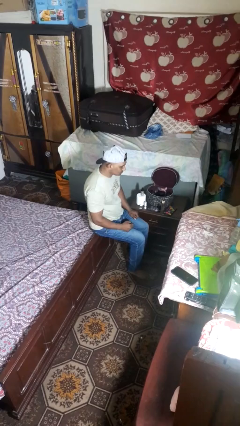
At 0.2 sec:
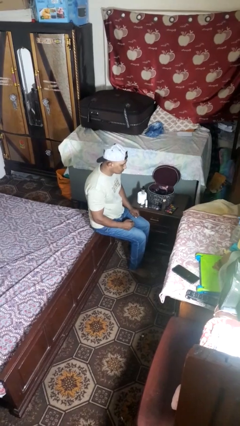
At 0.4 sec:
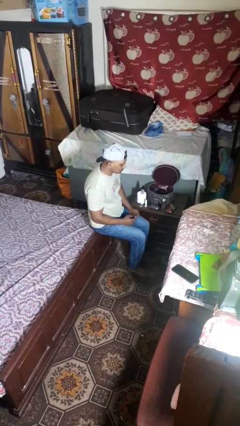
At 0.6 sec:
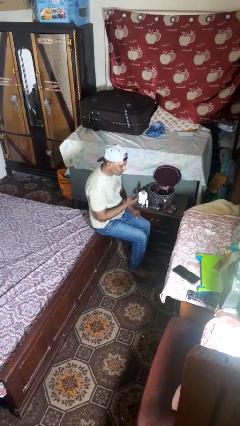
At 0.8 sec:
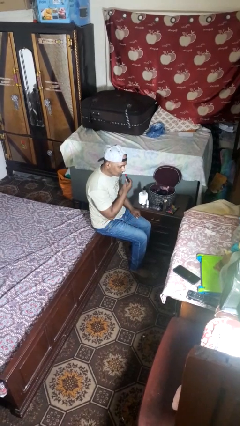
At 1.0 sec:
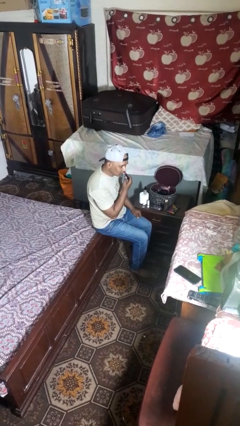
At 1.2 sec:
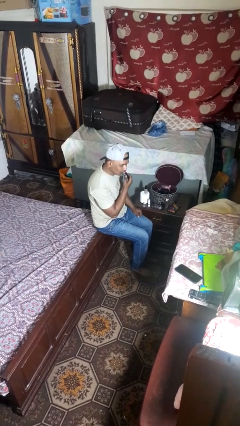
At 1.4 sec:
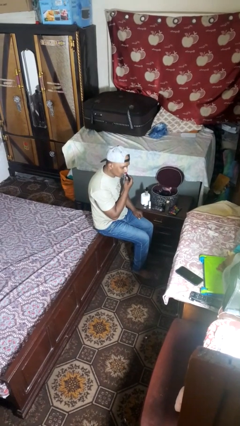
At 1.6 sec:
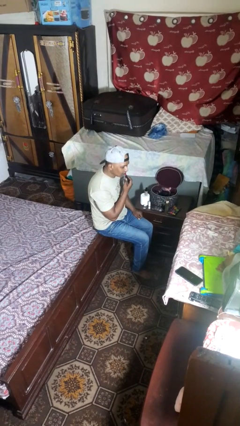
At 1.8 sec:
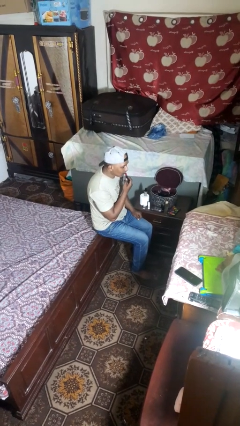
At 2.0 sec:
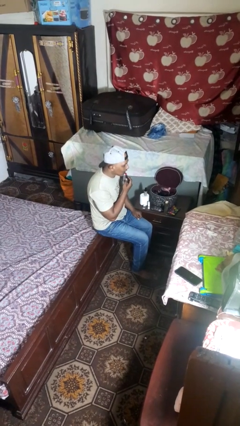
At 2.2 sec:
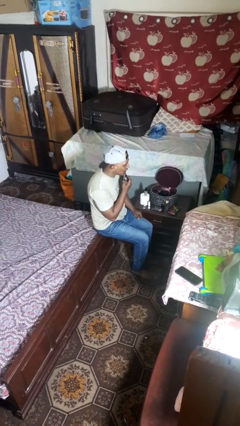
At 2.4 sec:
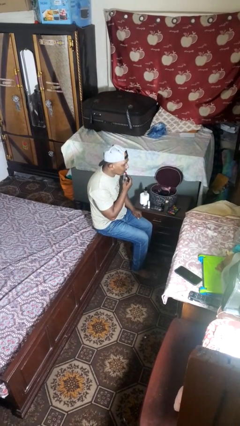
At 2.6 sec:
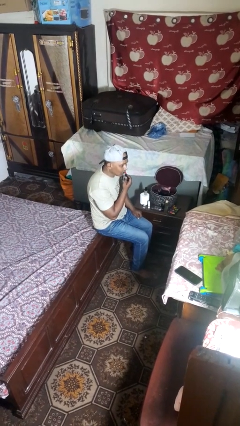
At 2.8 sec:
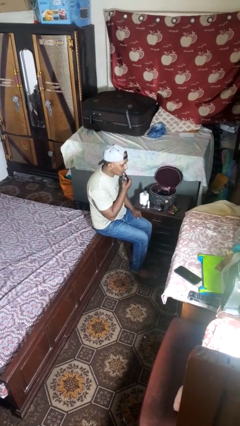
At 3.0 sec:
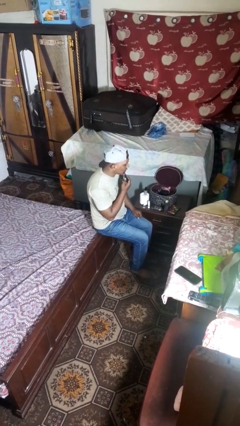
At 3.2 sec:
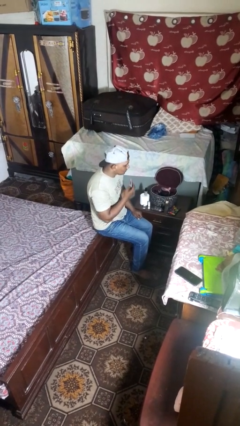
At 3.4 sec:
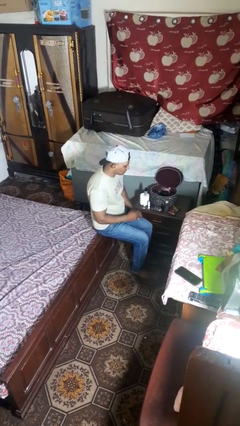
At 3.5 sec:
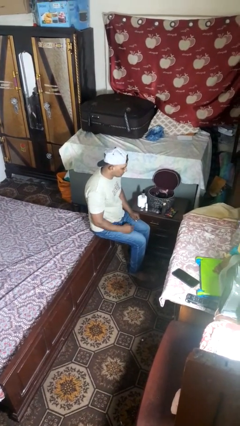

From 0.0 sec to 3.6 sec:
person applies lip makeup

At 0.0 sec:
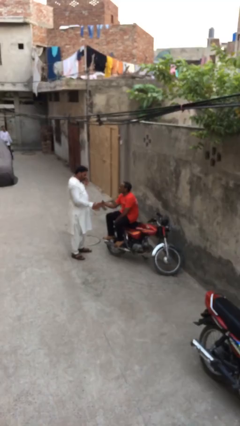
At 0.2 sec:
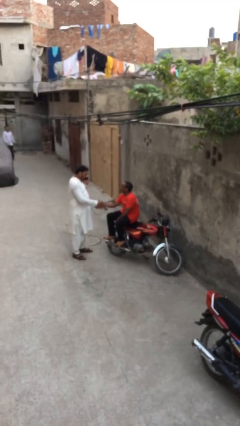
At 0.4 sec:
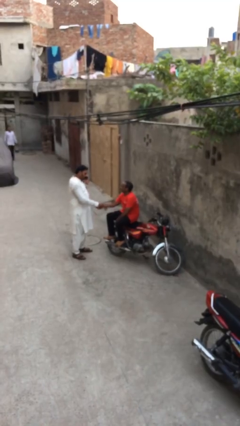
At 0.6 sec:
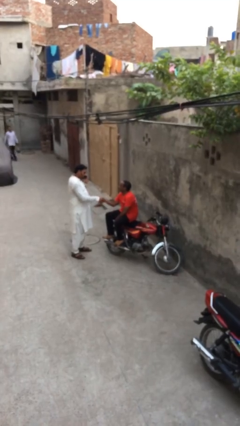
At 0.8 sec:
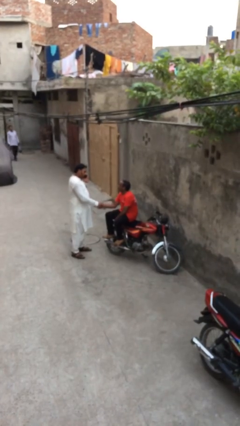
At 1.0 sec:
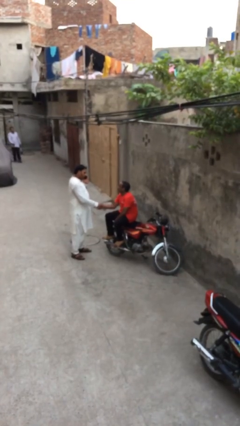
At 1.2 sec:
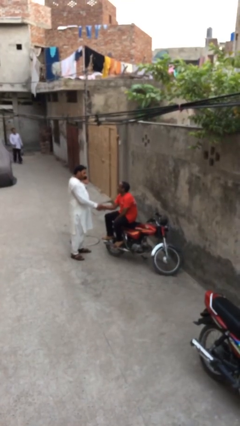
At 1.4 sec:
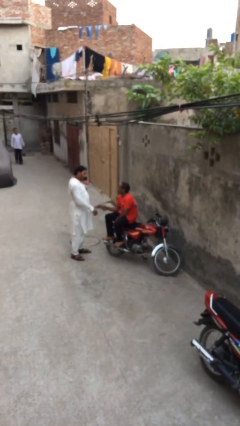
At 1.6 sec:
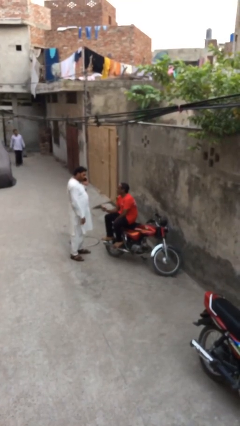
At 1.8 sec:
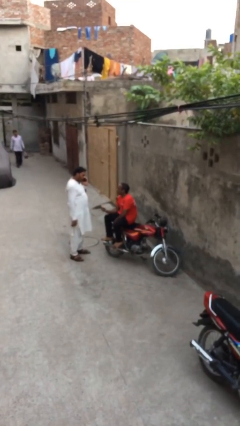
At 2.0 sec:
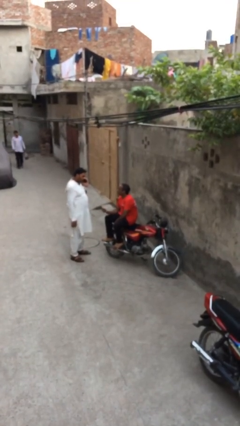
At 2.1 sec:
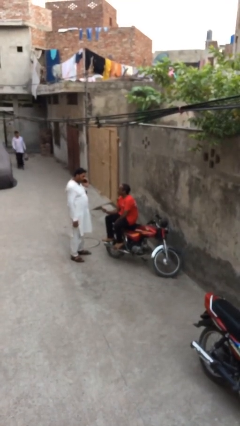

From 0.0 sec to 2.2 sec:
person shakes hand

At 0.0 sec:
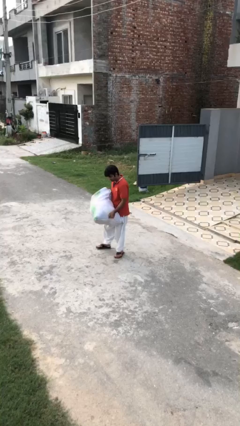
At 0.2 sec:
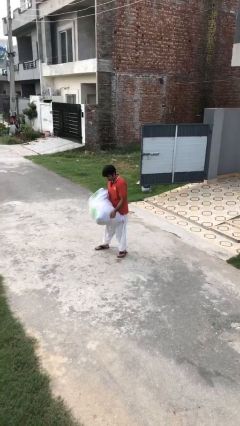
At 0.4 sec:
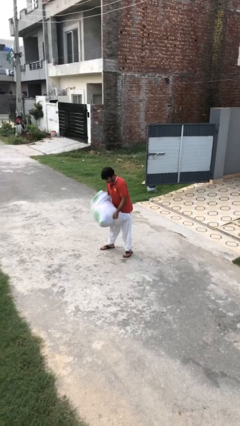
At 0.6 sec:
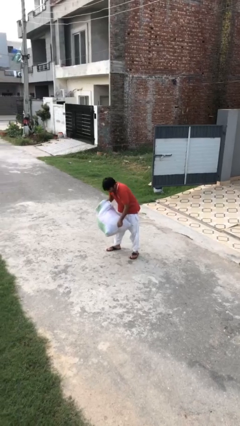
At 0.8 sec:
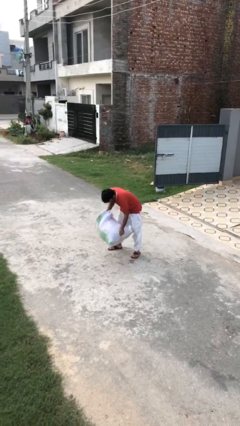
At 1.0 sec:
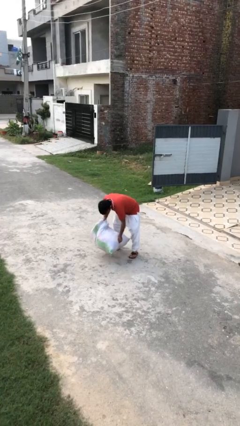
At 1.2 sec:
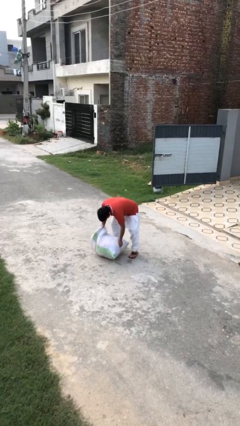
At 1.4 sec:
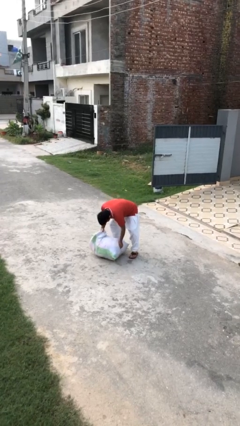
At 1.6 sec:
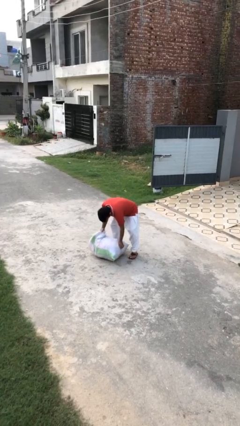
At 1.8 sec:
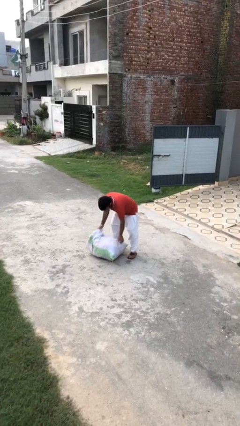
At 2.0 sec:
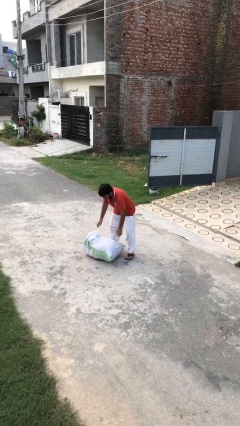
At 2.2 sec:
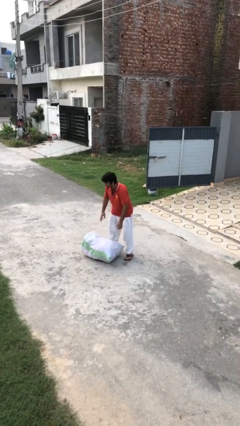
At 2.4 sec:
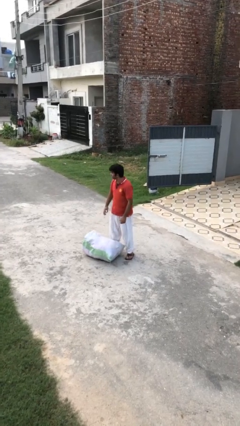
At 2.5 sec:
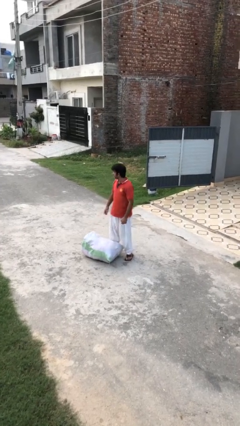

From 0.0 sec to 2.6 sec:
person puts down object on floor

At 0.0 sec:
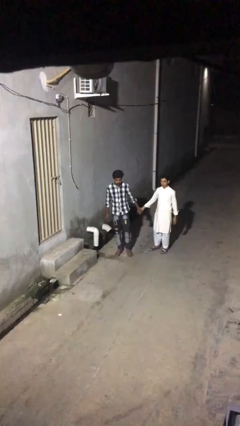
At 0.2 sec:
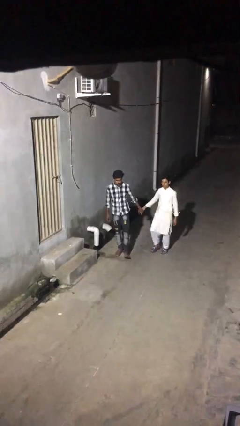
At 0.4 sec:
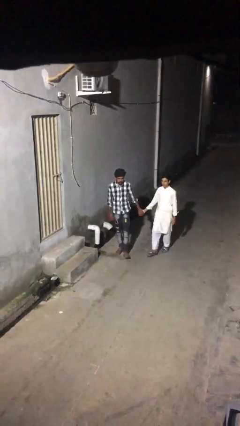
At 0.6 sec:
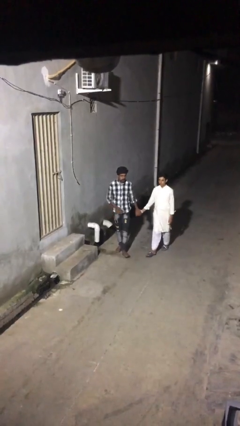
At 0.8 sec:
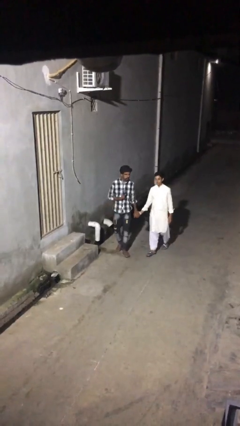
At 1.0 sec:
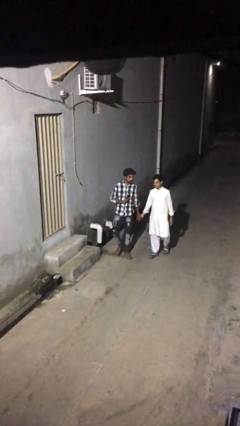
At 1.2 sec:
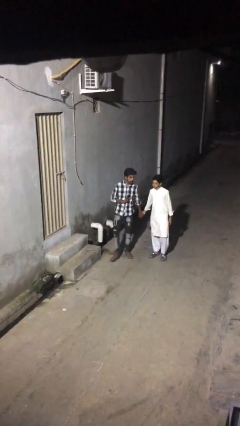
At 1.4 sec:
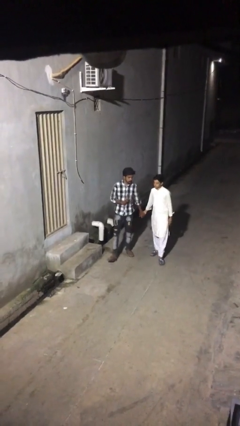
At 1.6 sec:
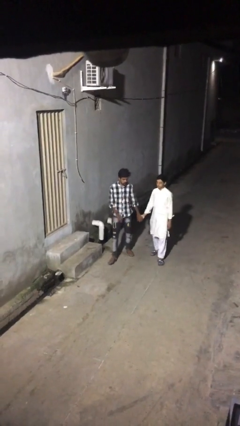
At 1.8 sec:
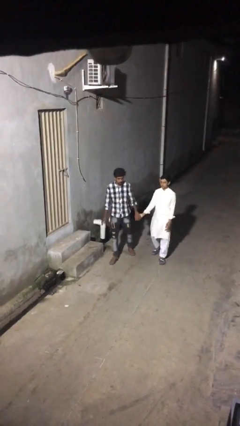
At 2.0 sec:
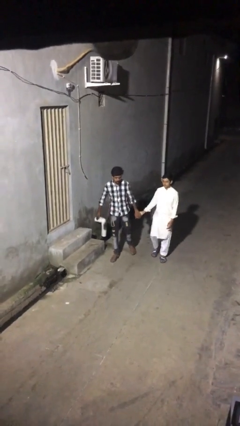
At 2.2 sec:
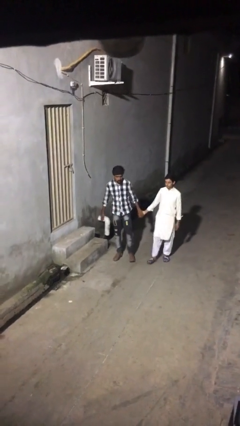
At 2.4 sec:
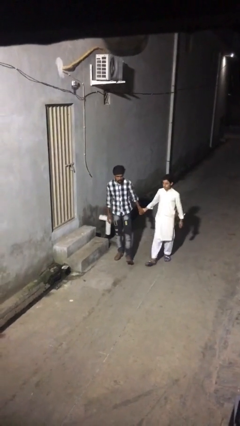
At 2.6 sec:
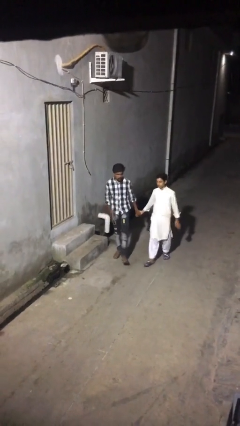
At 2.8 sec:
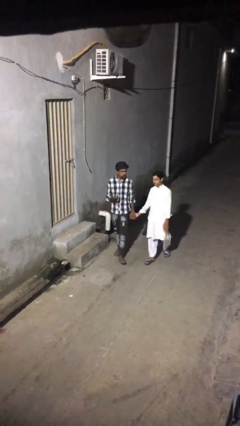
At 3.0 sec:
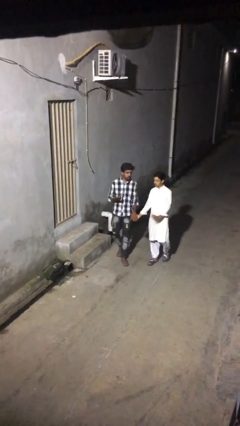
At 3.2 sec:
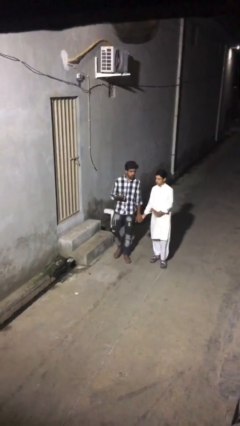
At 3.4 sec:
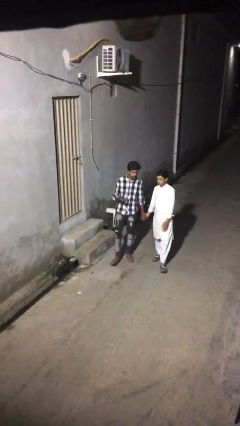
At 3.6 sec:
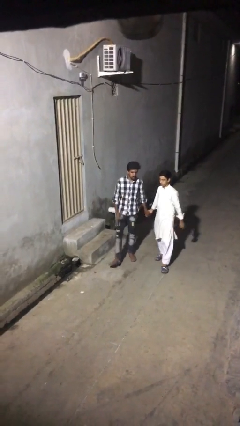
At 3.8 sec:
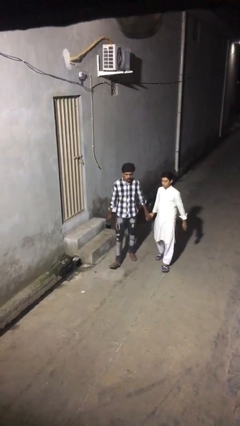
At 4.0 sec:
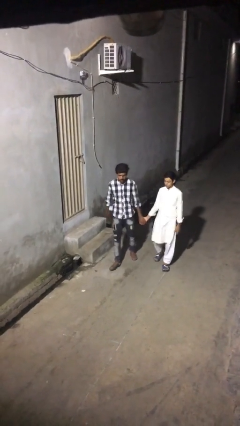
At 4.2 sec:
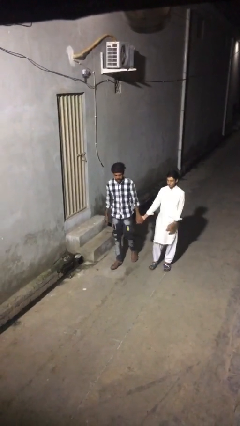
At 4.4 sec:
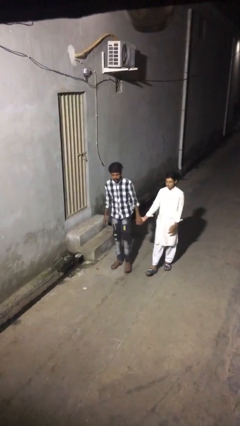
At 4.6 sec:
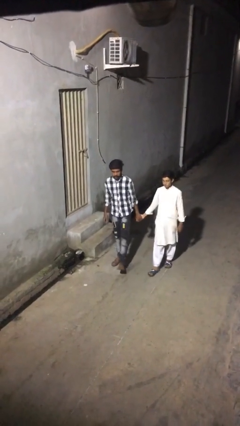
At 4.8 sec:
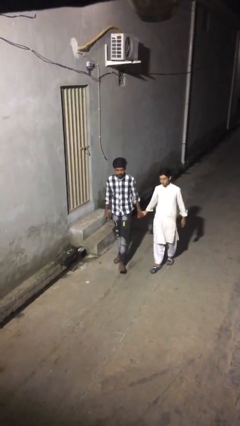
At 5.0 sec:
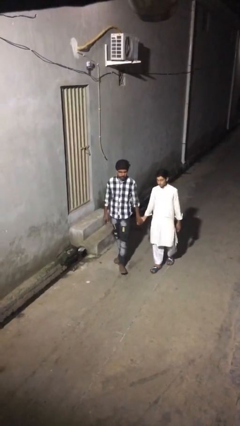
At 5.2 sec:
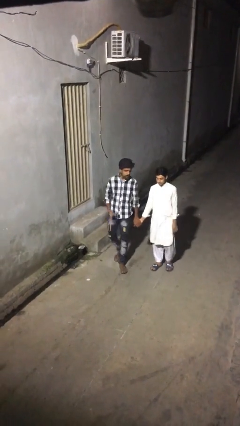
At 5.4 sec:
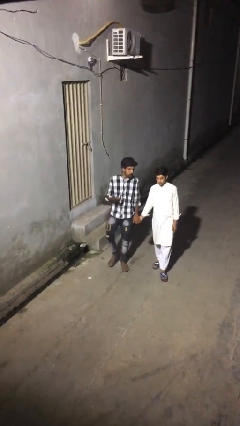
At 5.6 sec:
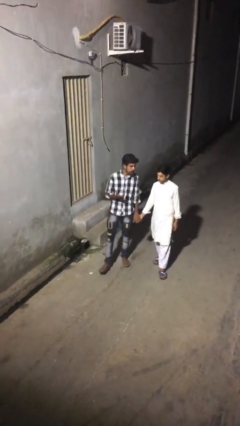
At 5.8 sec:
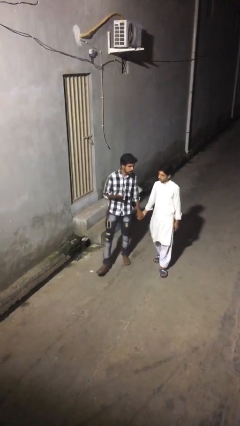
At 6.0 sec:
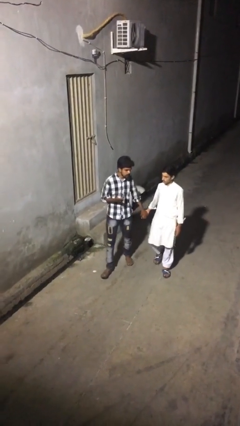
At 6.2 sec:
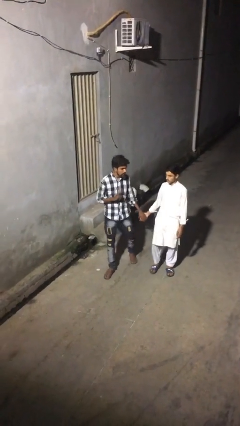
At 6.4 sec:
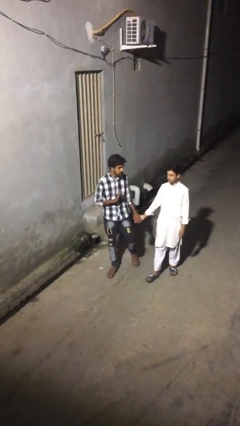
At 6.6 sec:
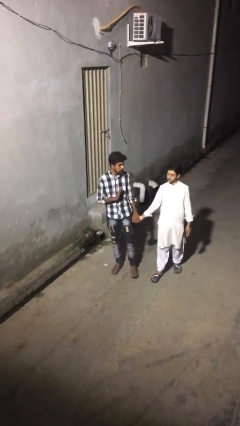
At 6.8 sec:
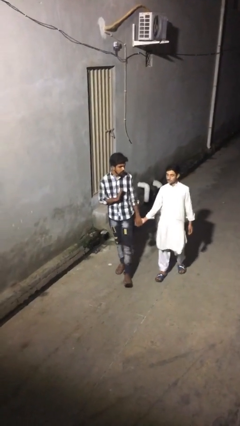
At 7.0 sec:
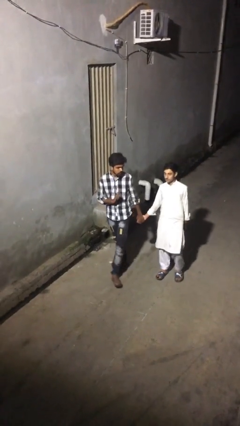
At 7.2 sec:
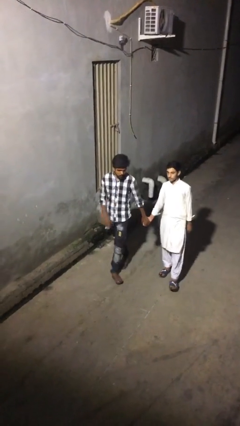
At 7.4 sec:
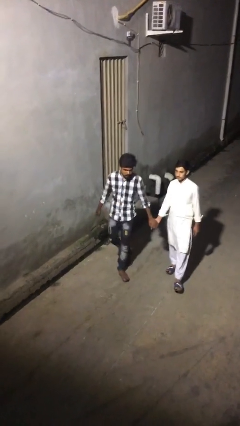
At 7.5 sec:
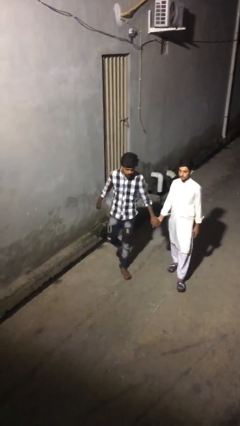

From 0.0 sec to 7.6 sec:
person holds hand

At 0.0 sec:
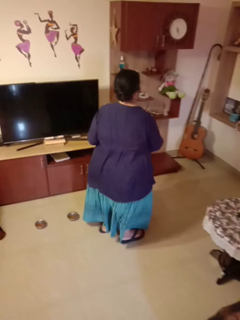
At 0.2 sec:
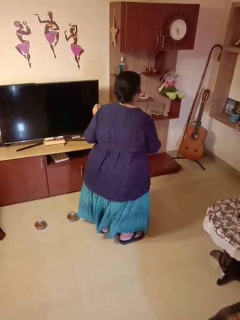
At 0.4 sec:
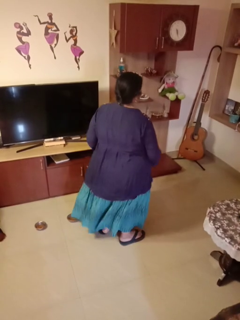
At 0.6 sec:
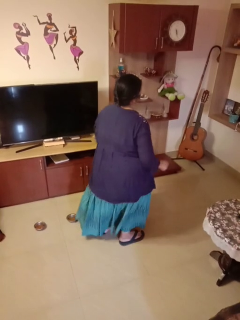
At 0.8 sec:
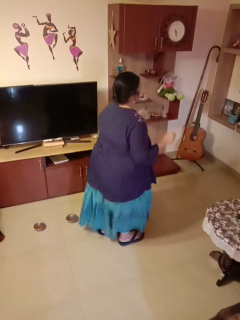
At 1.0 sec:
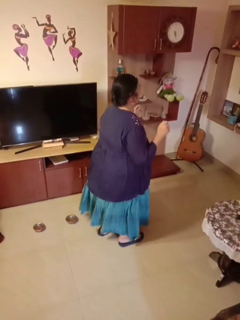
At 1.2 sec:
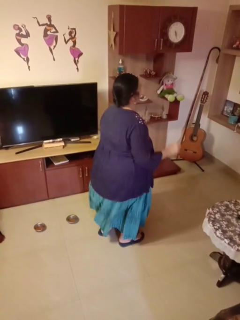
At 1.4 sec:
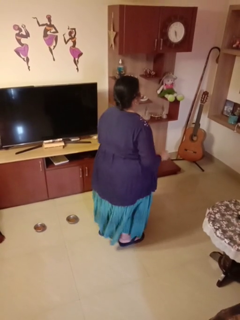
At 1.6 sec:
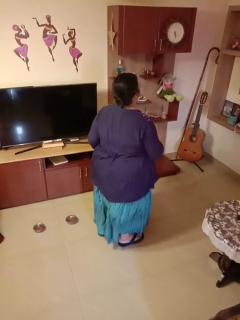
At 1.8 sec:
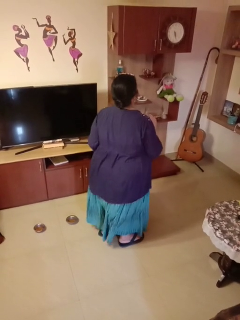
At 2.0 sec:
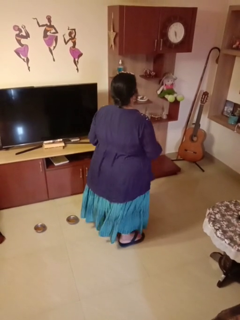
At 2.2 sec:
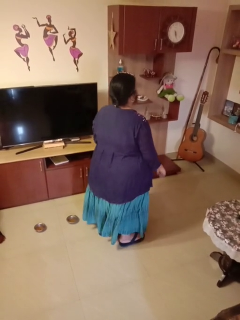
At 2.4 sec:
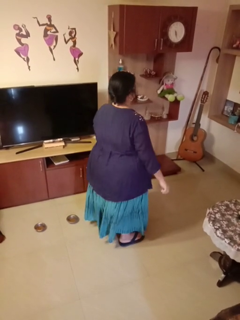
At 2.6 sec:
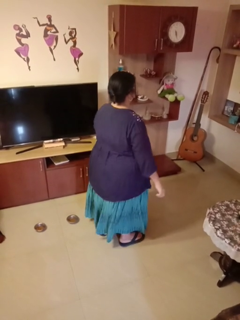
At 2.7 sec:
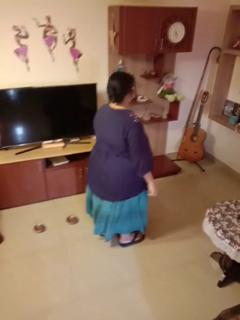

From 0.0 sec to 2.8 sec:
person dances in place
